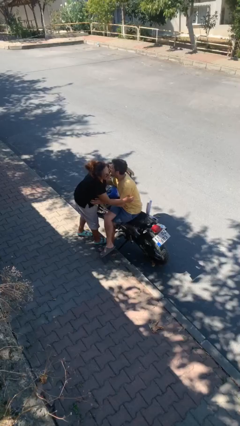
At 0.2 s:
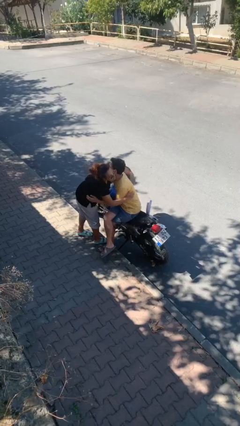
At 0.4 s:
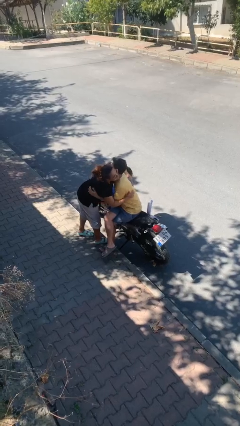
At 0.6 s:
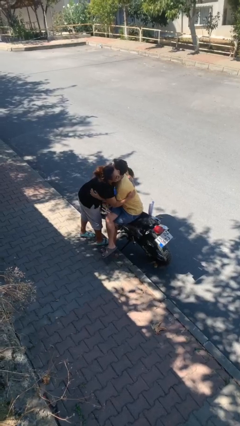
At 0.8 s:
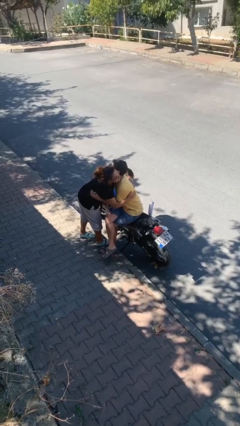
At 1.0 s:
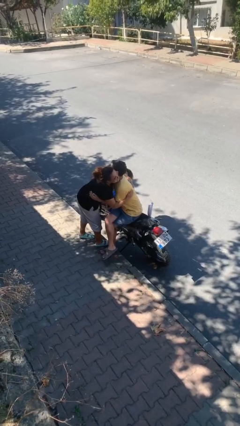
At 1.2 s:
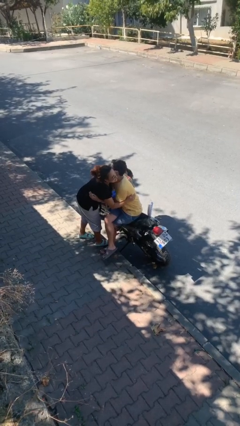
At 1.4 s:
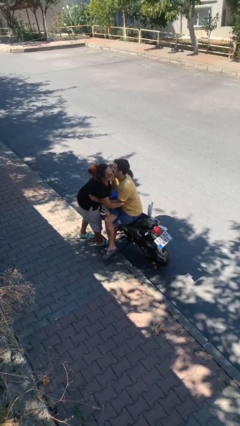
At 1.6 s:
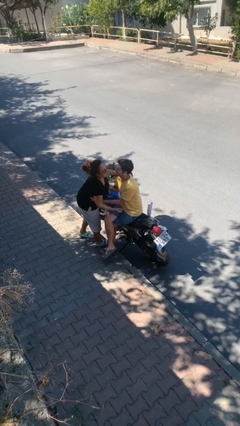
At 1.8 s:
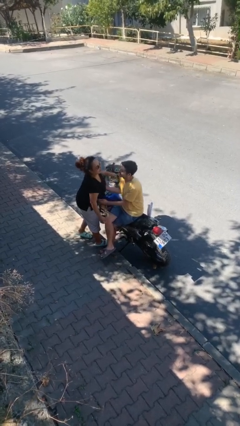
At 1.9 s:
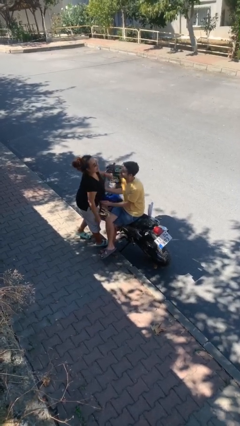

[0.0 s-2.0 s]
person embraces person

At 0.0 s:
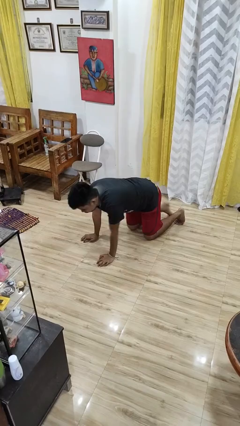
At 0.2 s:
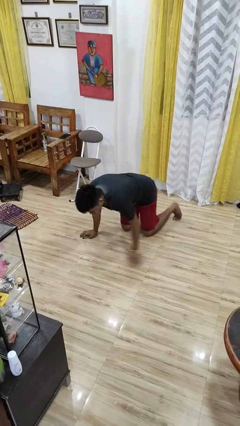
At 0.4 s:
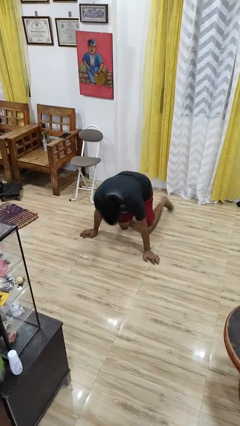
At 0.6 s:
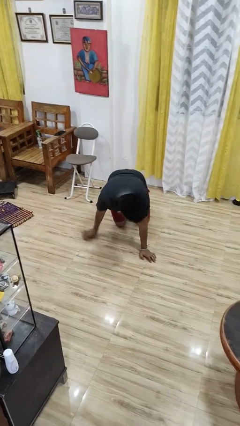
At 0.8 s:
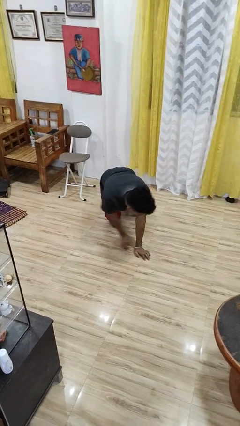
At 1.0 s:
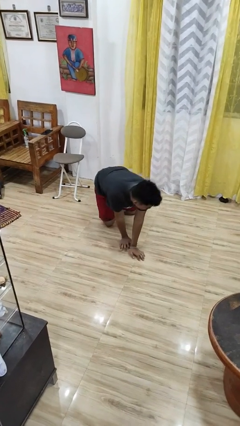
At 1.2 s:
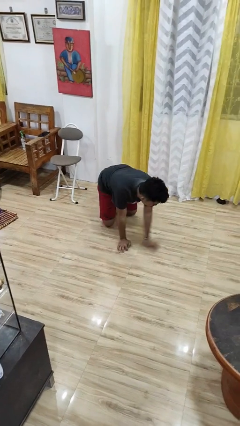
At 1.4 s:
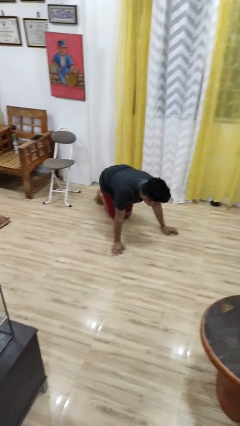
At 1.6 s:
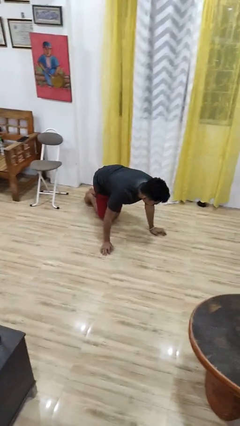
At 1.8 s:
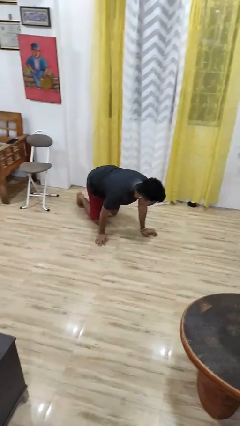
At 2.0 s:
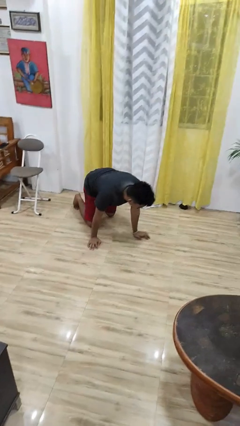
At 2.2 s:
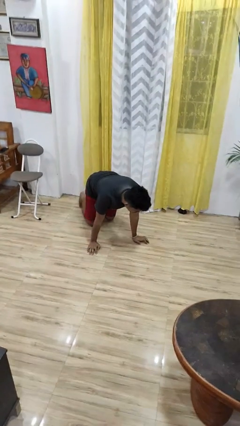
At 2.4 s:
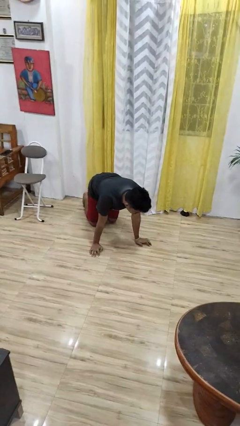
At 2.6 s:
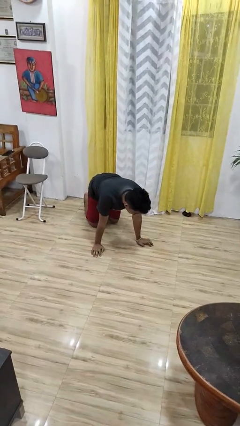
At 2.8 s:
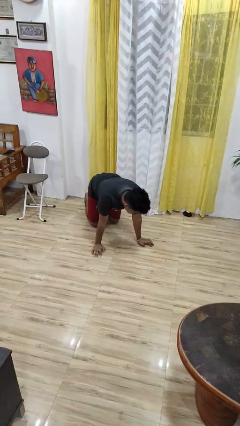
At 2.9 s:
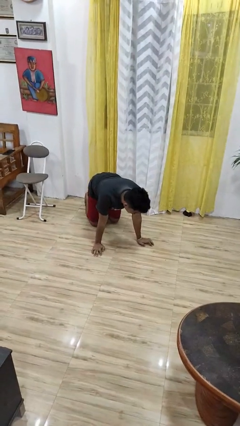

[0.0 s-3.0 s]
person crawls

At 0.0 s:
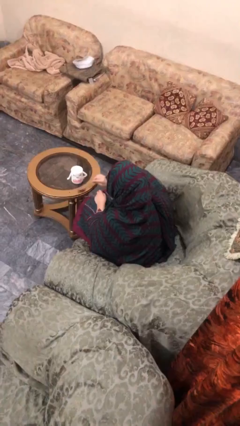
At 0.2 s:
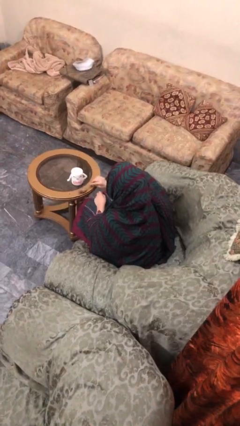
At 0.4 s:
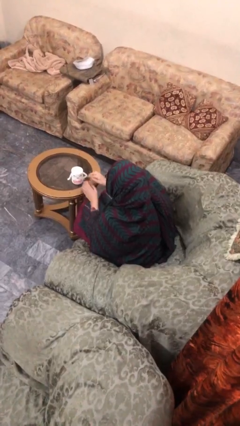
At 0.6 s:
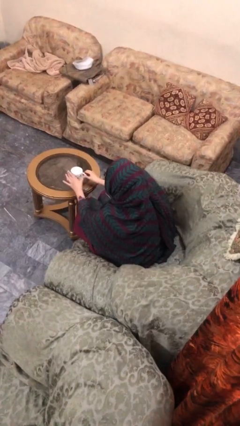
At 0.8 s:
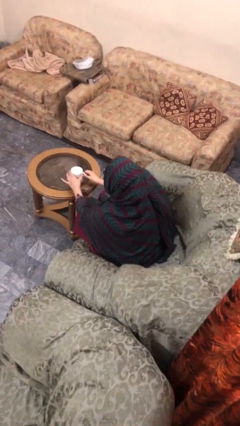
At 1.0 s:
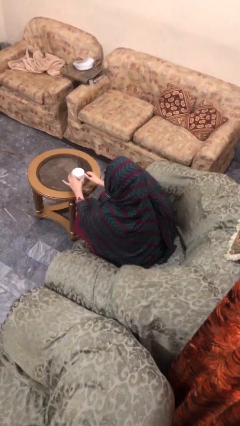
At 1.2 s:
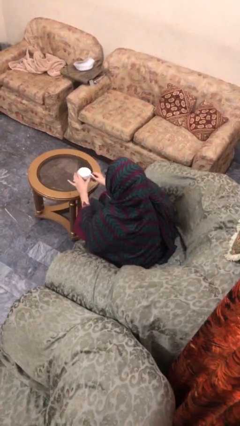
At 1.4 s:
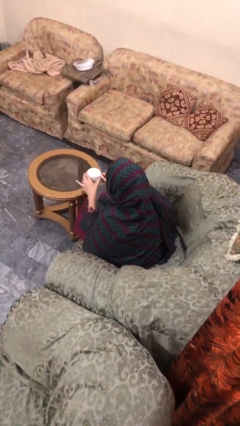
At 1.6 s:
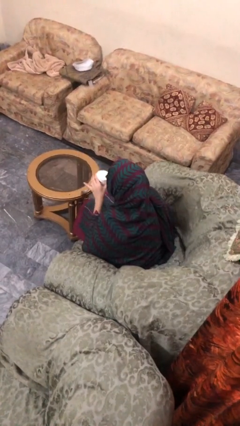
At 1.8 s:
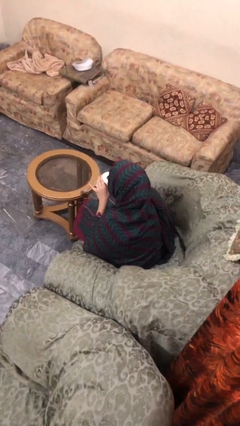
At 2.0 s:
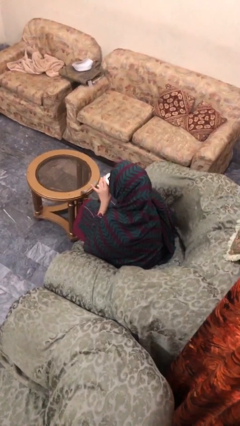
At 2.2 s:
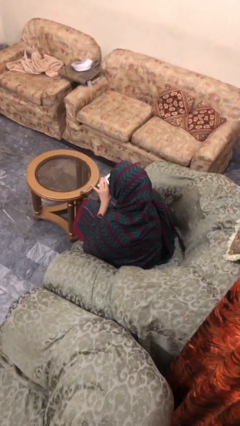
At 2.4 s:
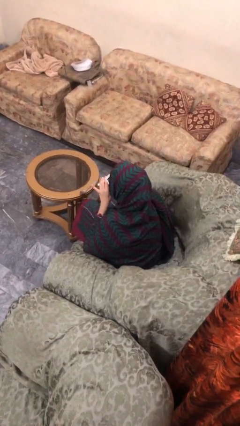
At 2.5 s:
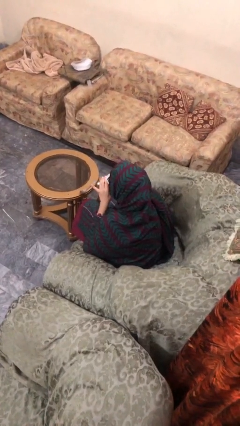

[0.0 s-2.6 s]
person drinks from mug

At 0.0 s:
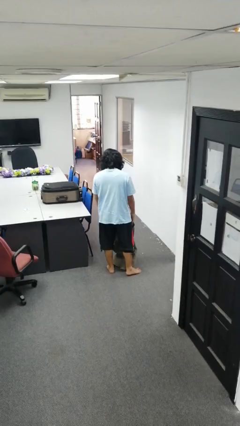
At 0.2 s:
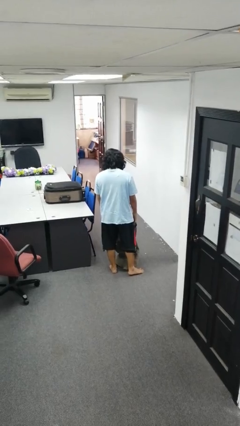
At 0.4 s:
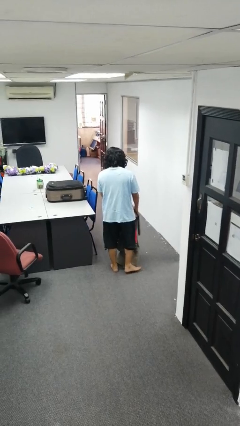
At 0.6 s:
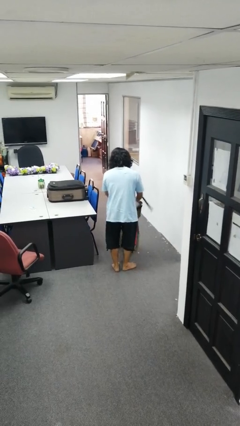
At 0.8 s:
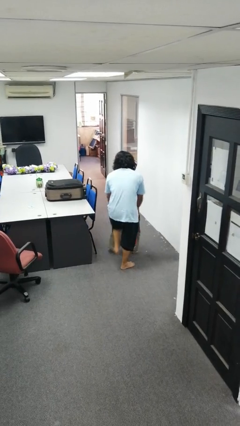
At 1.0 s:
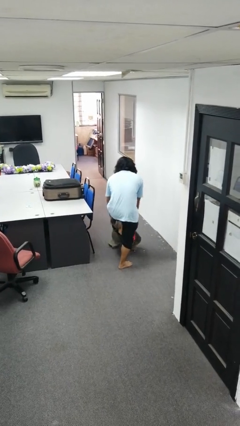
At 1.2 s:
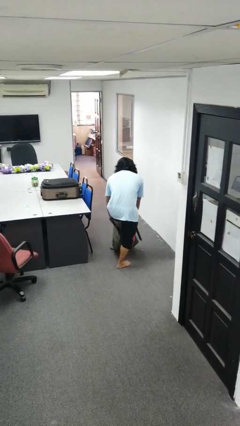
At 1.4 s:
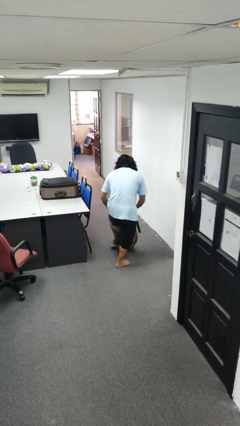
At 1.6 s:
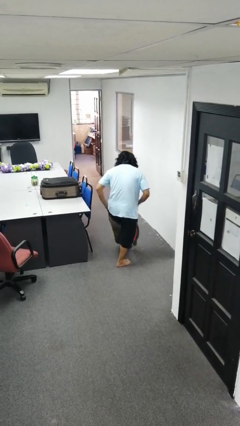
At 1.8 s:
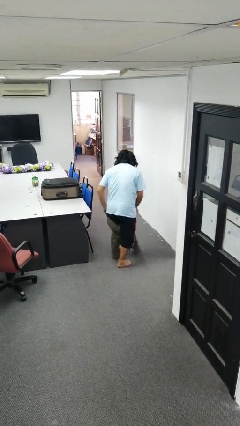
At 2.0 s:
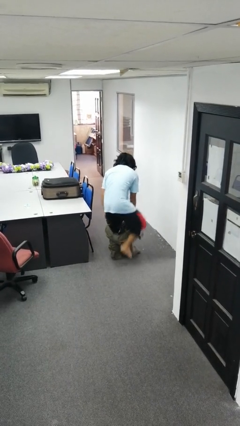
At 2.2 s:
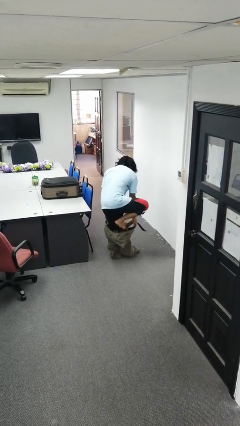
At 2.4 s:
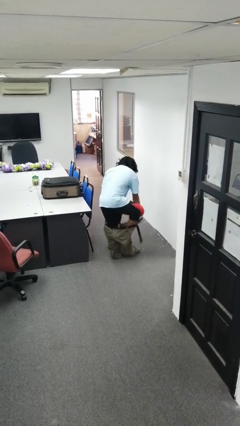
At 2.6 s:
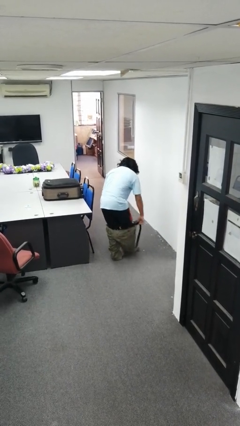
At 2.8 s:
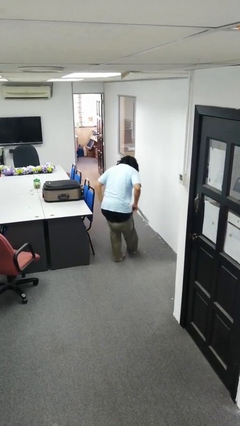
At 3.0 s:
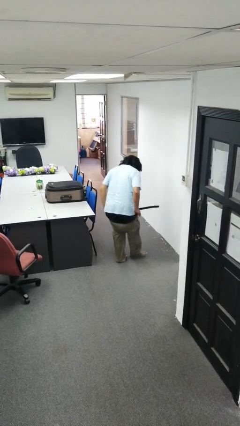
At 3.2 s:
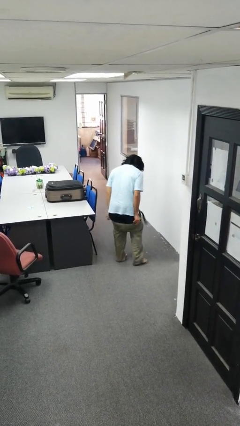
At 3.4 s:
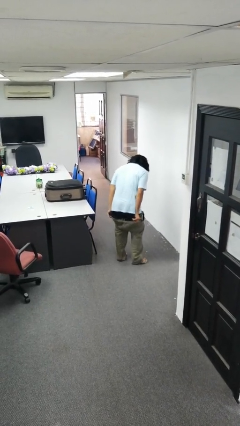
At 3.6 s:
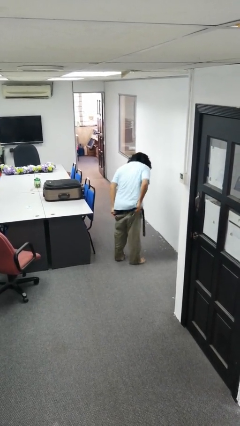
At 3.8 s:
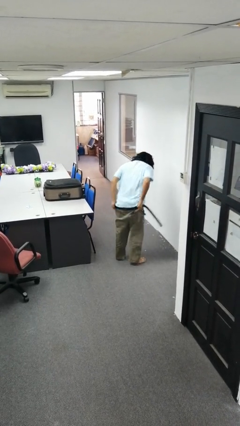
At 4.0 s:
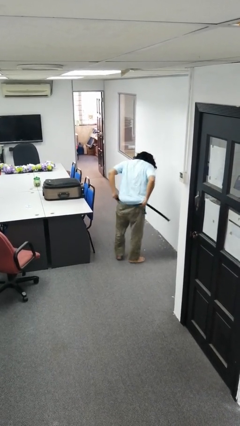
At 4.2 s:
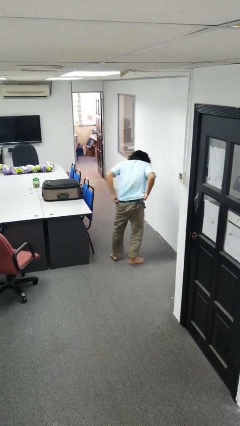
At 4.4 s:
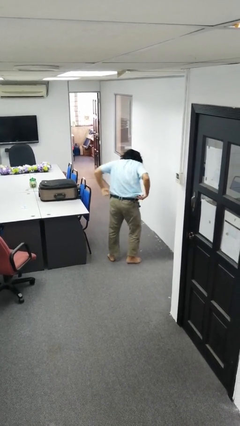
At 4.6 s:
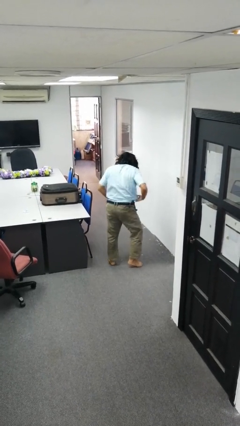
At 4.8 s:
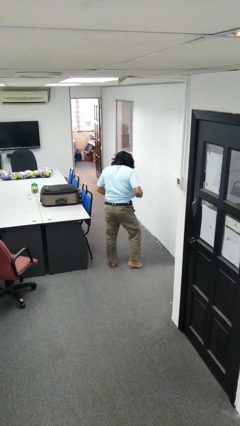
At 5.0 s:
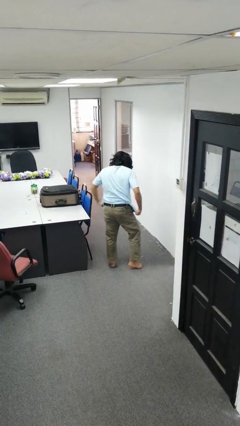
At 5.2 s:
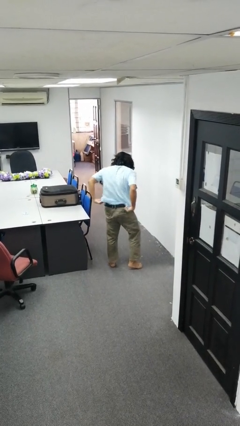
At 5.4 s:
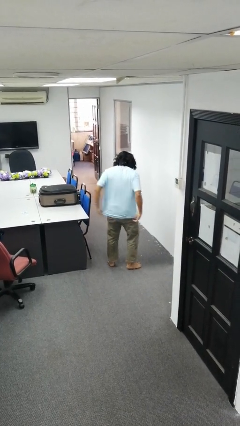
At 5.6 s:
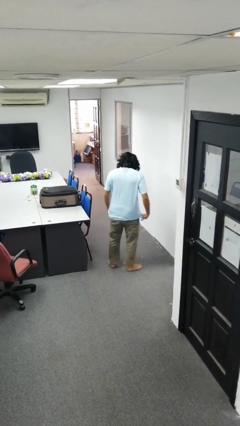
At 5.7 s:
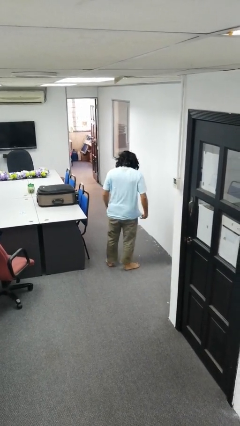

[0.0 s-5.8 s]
person takes off pants

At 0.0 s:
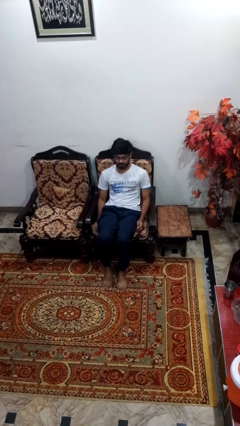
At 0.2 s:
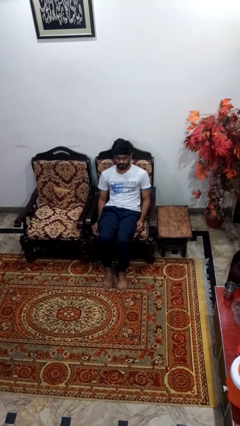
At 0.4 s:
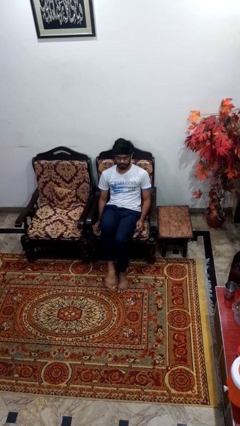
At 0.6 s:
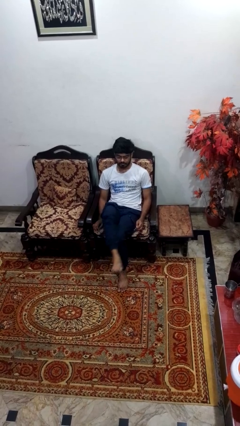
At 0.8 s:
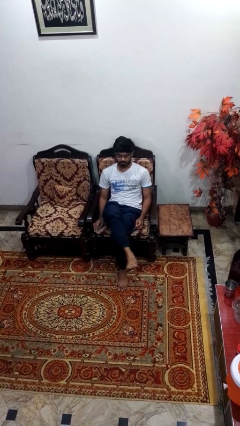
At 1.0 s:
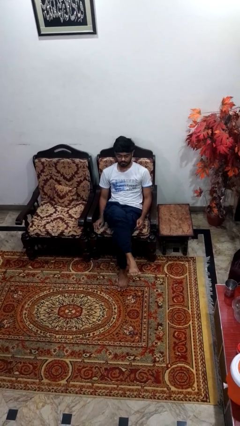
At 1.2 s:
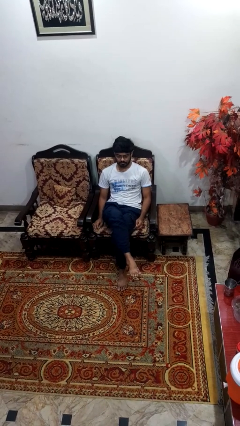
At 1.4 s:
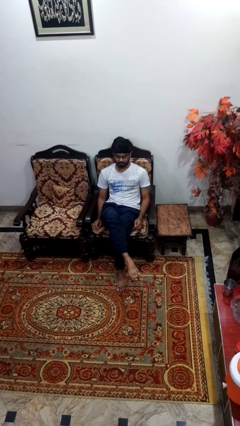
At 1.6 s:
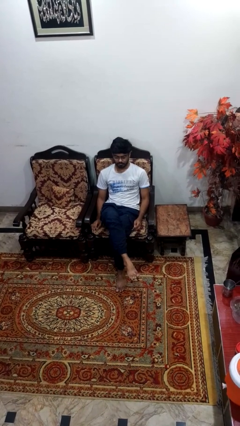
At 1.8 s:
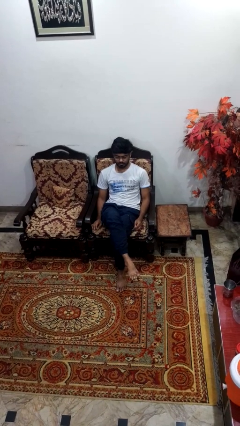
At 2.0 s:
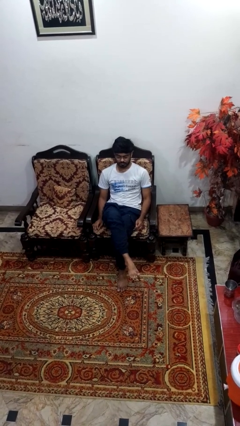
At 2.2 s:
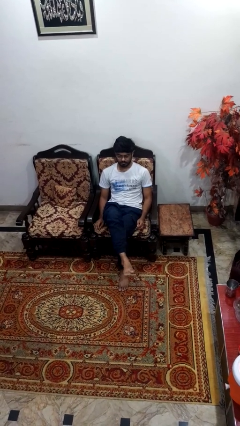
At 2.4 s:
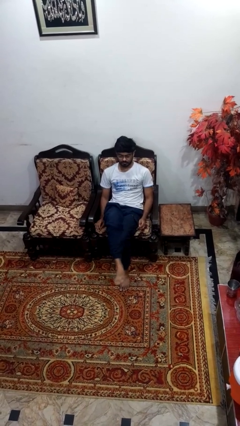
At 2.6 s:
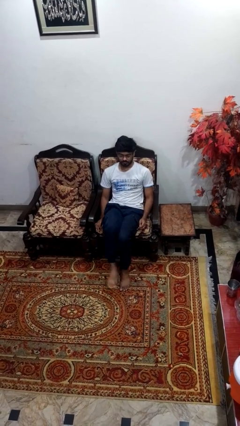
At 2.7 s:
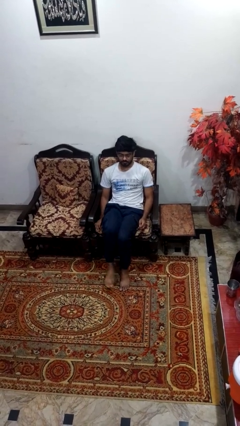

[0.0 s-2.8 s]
person crosses legs

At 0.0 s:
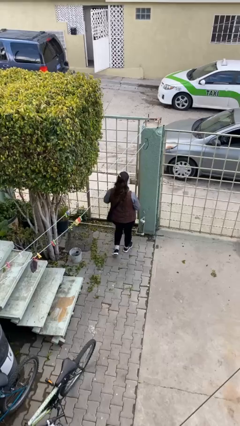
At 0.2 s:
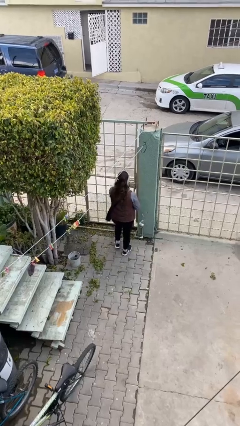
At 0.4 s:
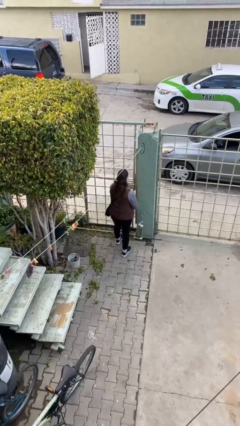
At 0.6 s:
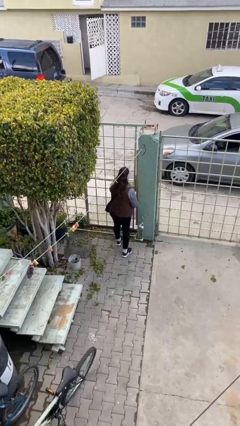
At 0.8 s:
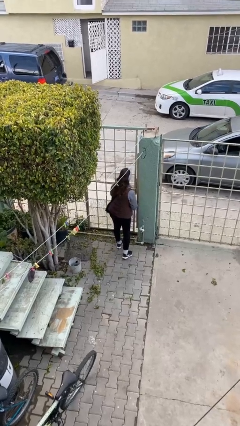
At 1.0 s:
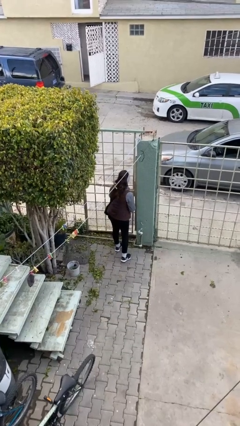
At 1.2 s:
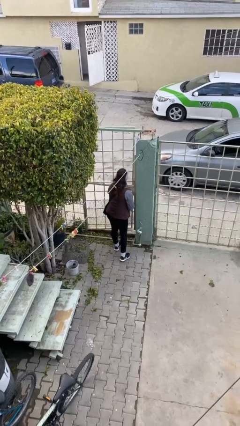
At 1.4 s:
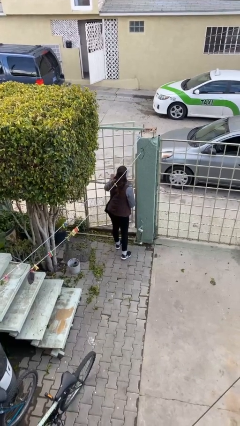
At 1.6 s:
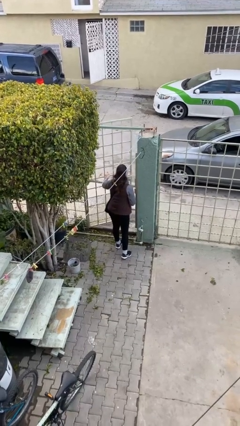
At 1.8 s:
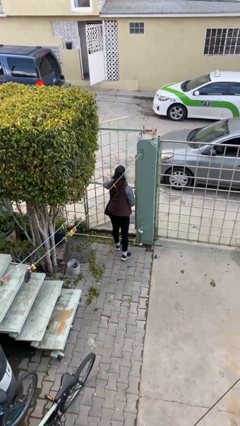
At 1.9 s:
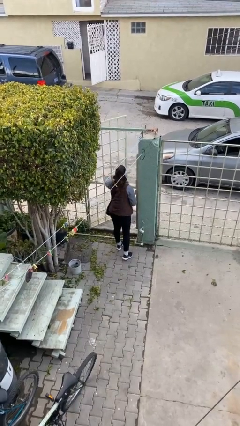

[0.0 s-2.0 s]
person opens facility door
